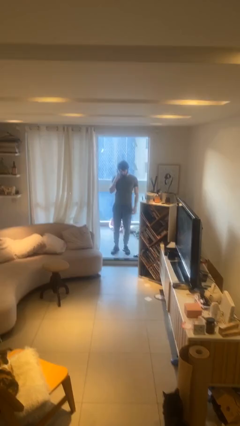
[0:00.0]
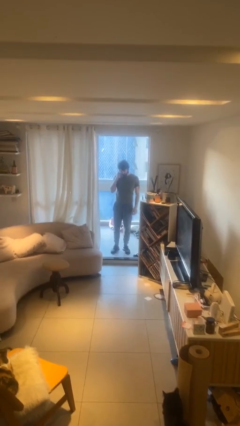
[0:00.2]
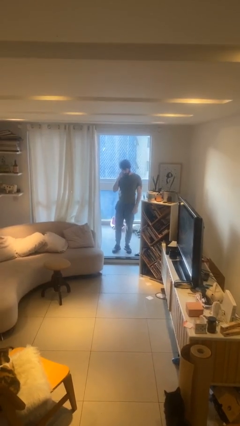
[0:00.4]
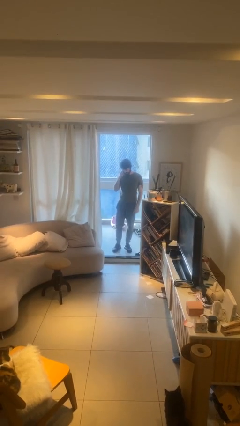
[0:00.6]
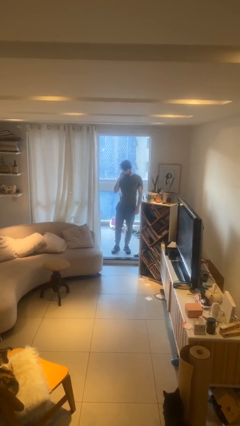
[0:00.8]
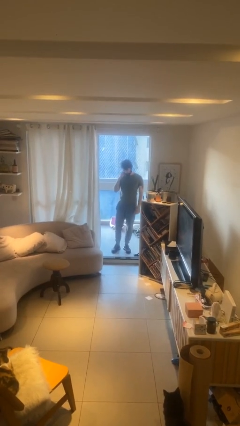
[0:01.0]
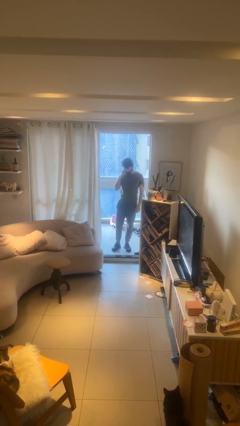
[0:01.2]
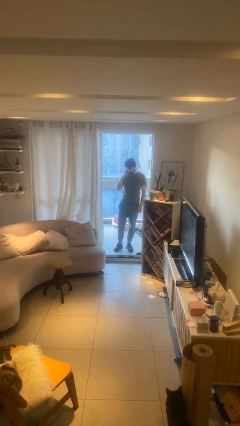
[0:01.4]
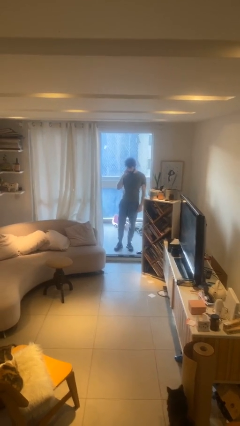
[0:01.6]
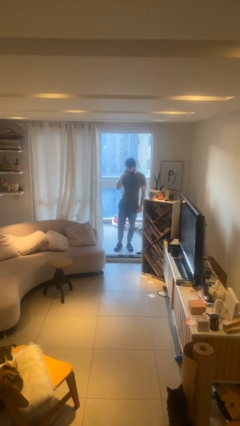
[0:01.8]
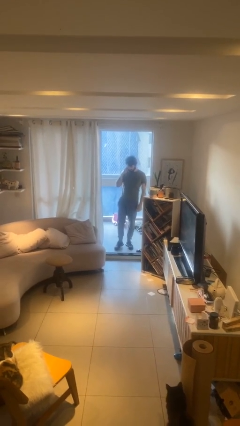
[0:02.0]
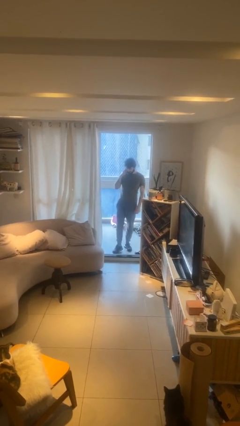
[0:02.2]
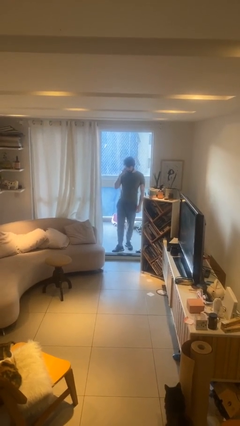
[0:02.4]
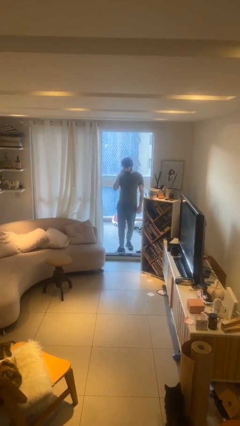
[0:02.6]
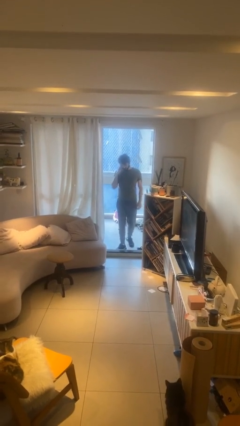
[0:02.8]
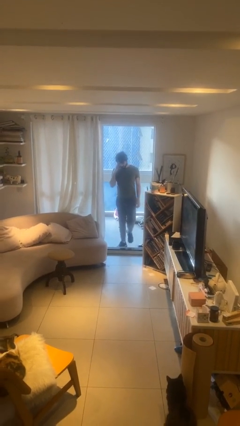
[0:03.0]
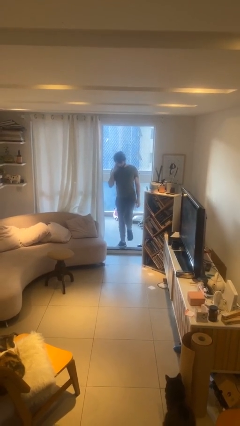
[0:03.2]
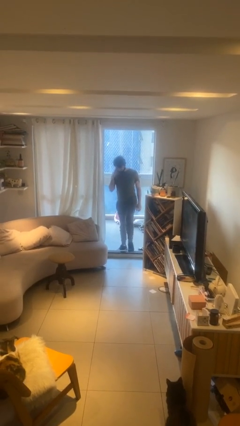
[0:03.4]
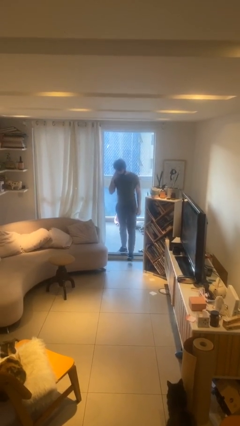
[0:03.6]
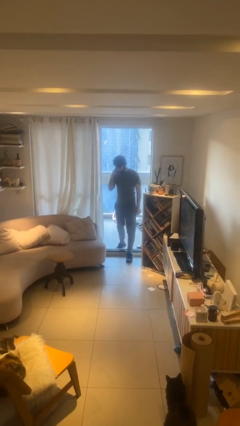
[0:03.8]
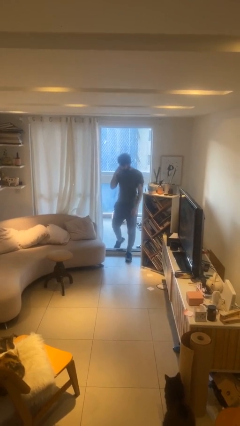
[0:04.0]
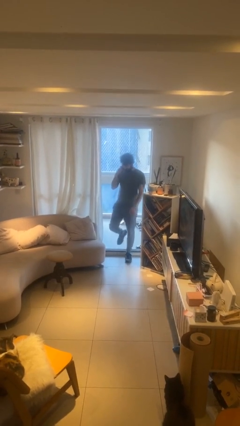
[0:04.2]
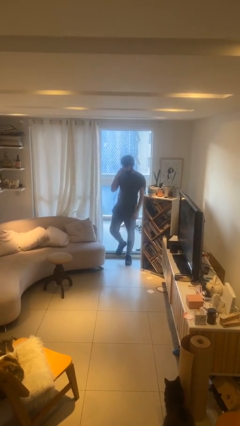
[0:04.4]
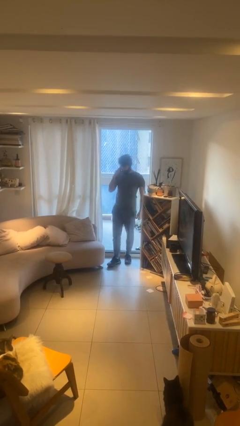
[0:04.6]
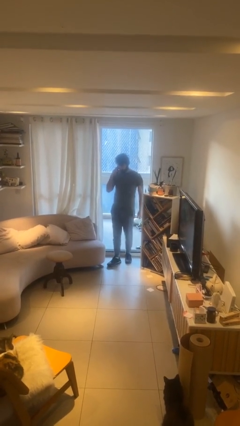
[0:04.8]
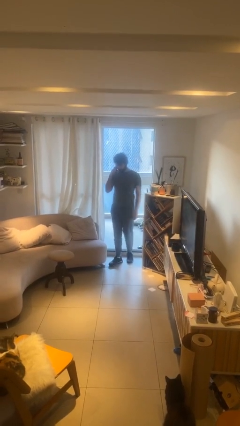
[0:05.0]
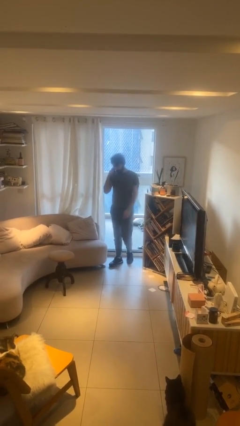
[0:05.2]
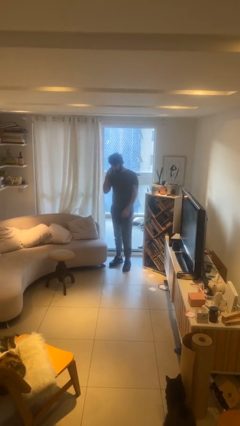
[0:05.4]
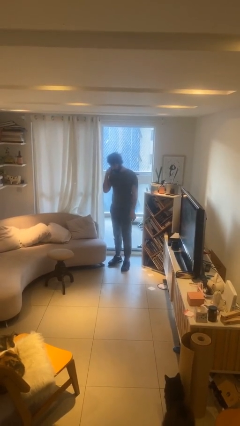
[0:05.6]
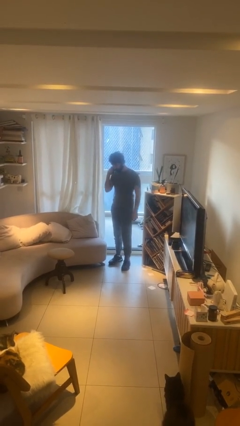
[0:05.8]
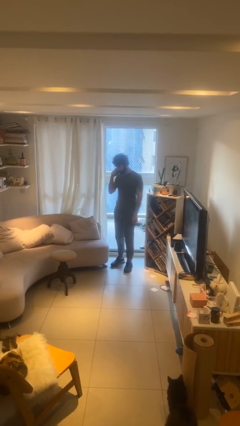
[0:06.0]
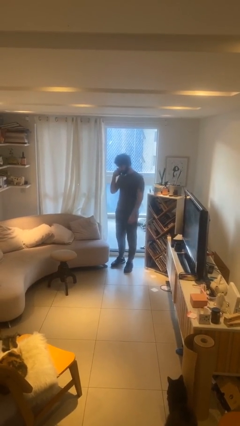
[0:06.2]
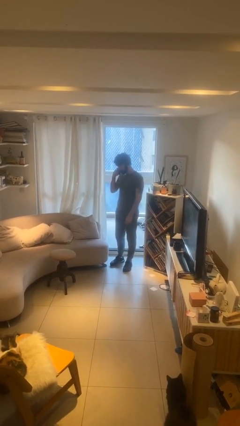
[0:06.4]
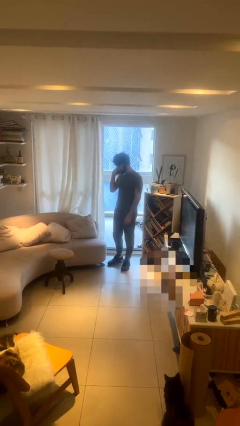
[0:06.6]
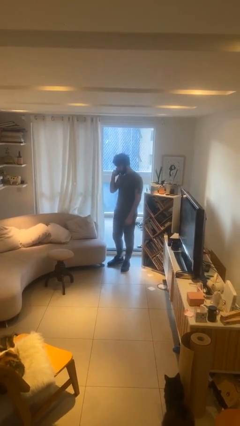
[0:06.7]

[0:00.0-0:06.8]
person enters scene through structure

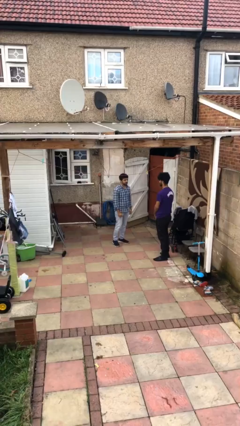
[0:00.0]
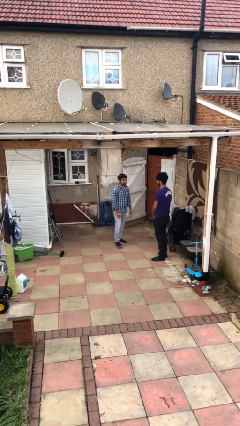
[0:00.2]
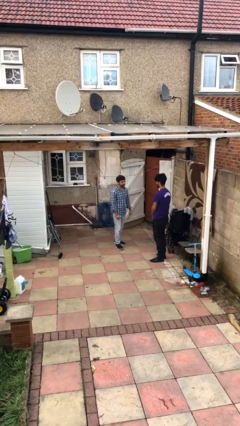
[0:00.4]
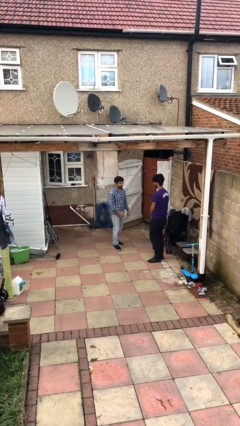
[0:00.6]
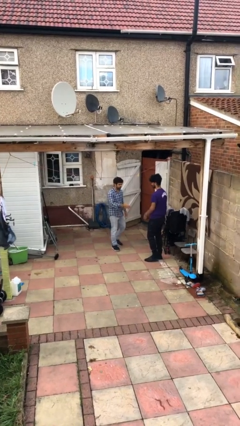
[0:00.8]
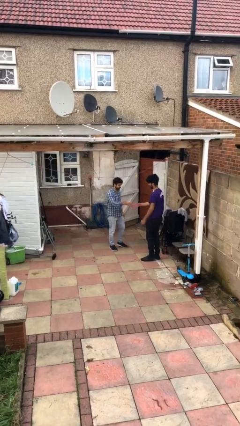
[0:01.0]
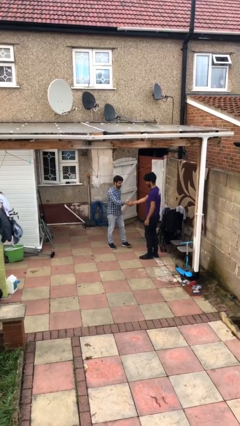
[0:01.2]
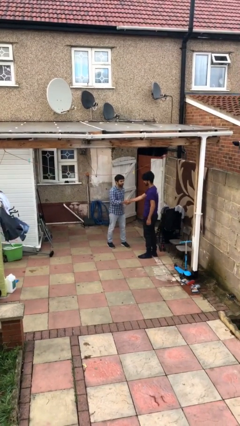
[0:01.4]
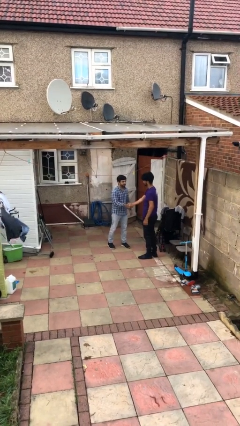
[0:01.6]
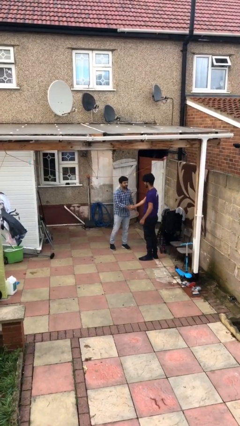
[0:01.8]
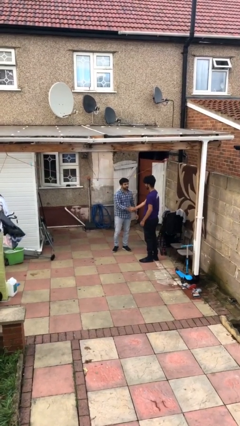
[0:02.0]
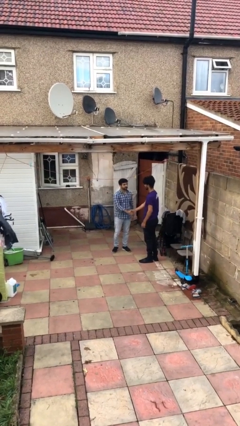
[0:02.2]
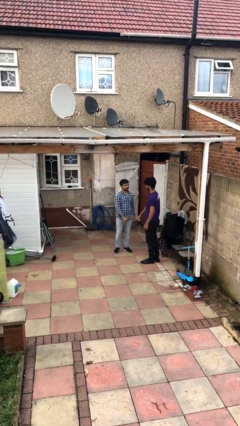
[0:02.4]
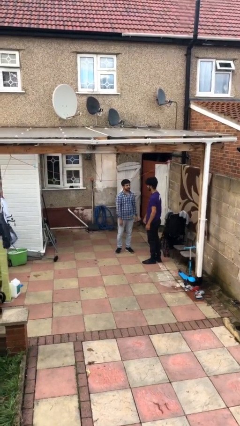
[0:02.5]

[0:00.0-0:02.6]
person shakes hand

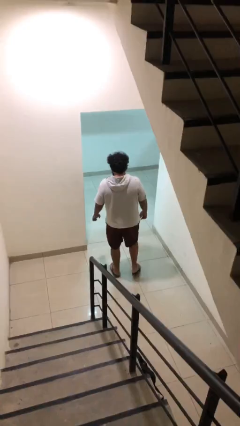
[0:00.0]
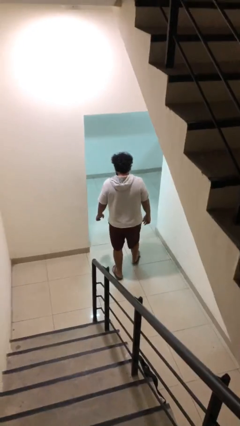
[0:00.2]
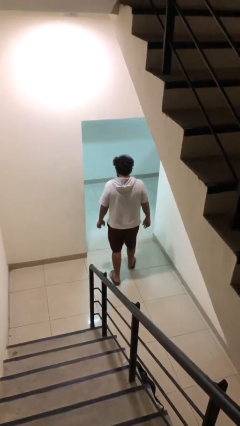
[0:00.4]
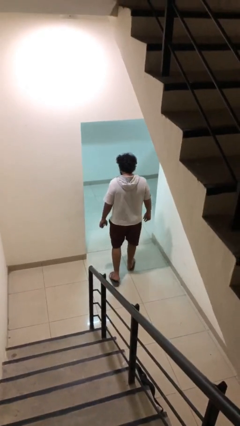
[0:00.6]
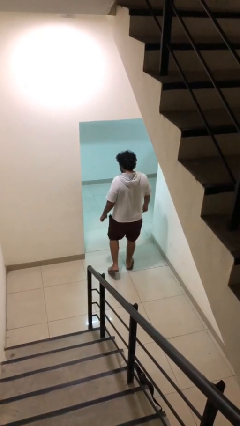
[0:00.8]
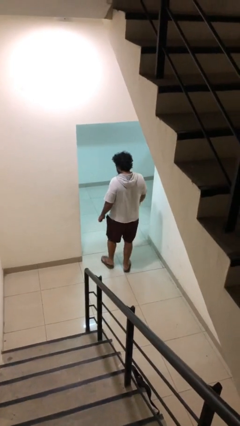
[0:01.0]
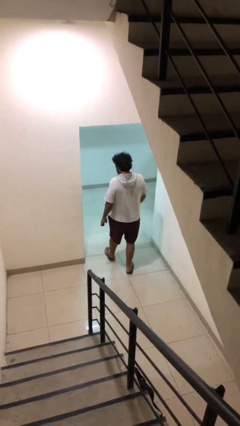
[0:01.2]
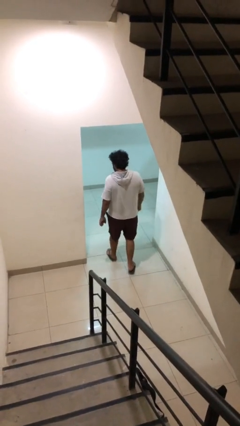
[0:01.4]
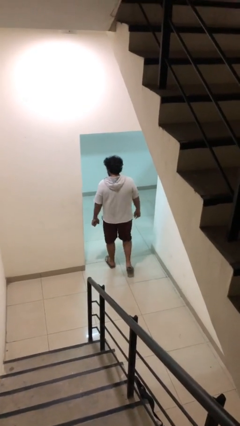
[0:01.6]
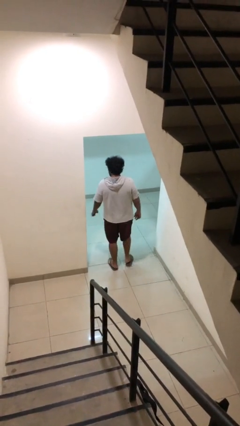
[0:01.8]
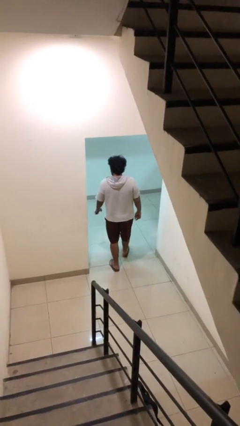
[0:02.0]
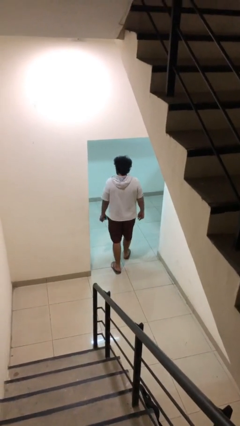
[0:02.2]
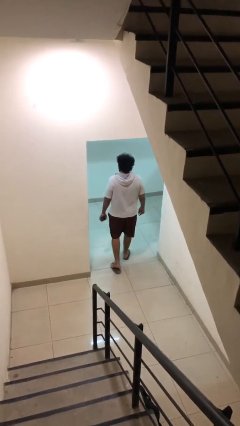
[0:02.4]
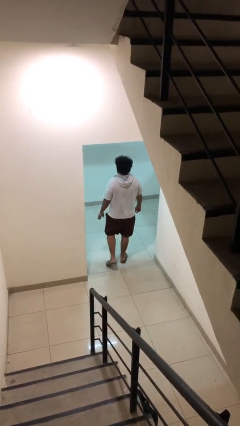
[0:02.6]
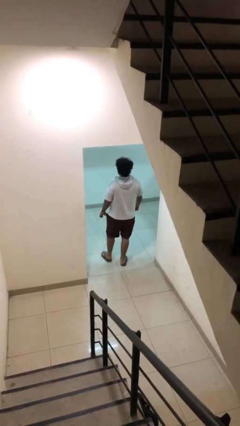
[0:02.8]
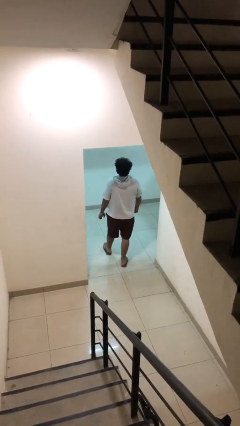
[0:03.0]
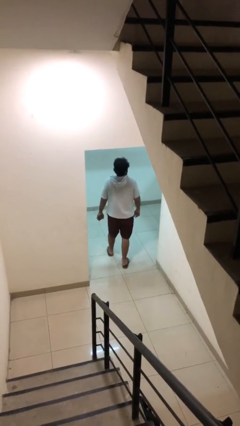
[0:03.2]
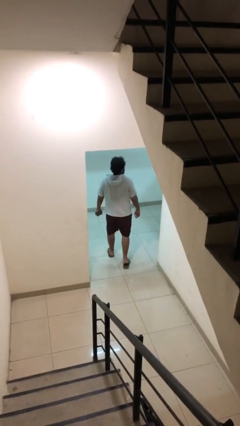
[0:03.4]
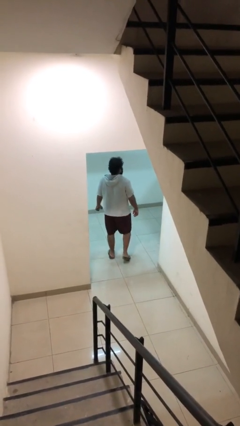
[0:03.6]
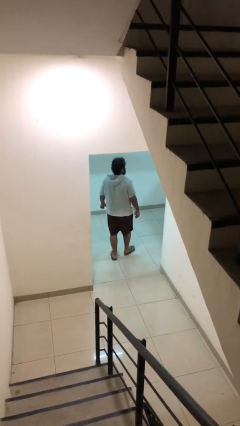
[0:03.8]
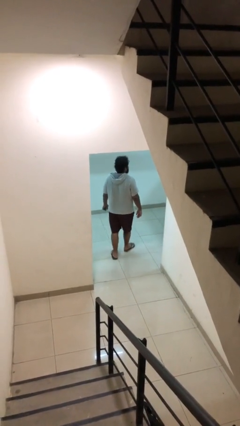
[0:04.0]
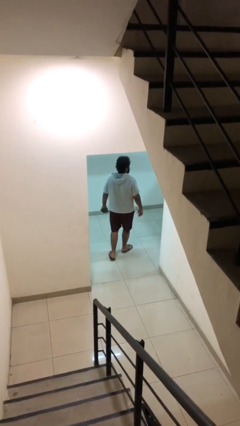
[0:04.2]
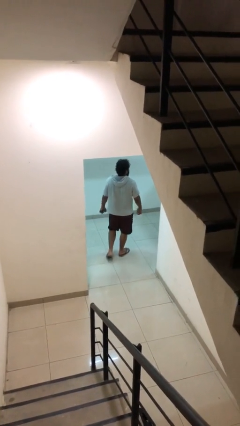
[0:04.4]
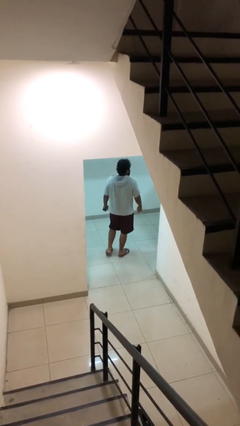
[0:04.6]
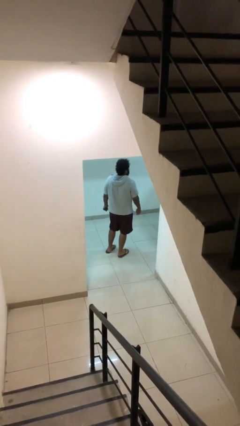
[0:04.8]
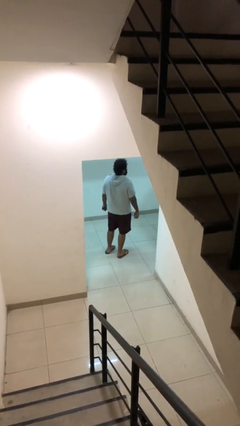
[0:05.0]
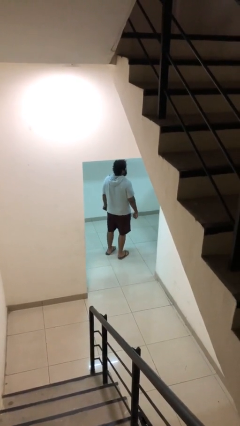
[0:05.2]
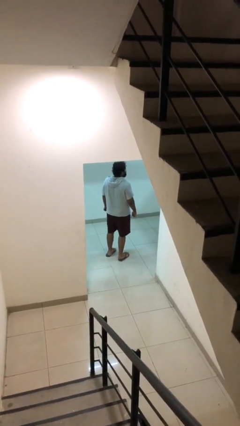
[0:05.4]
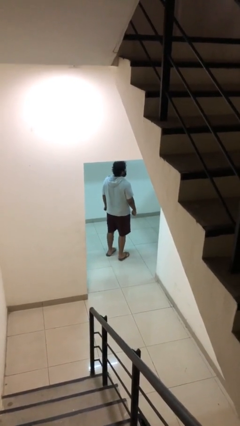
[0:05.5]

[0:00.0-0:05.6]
person exits scene through structure

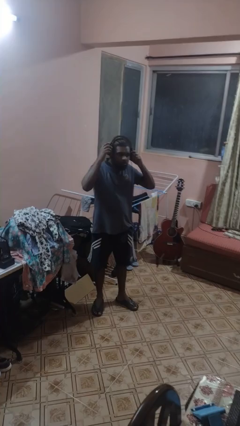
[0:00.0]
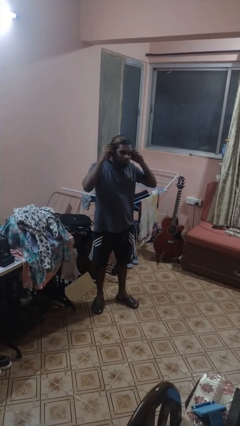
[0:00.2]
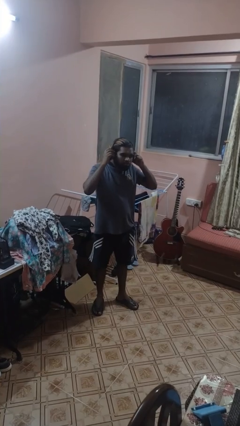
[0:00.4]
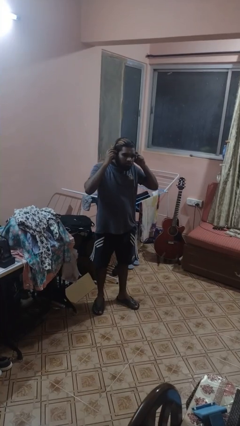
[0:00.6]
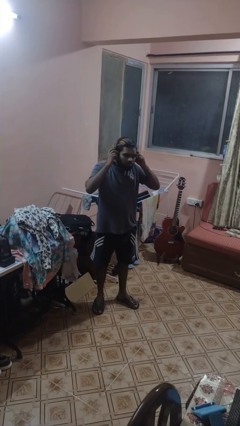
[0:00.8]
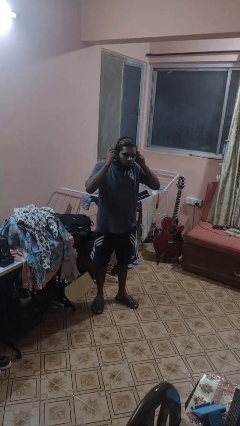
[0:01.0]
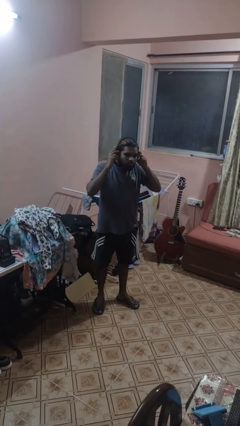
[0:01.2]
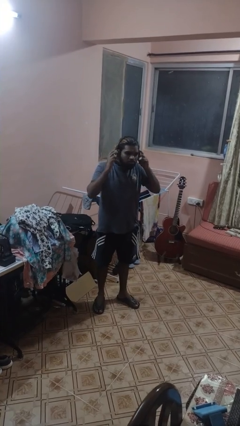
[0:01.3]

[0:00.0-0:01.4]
person puts on headphones

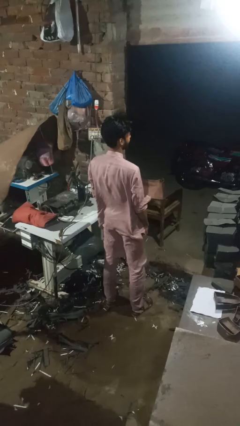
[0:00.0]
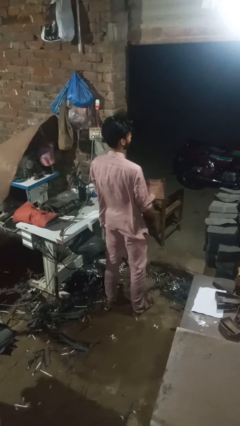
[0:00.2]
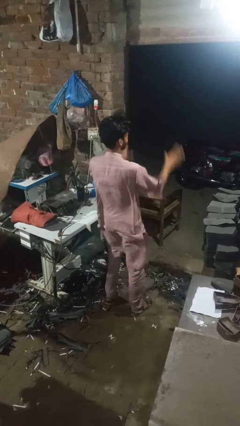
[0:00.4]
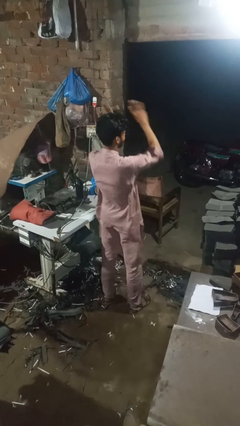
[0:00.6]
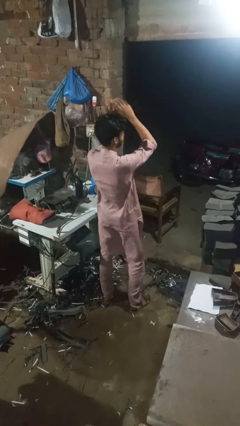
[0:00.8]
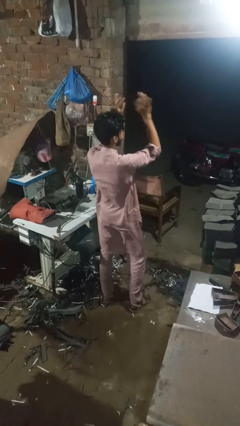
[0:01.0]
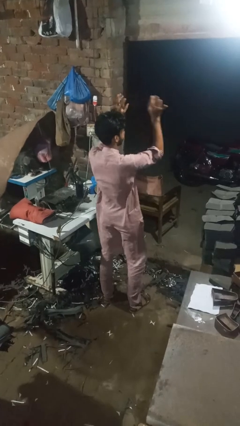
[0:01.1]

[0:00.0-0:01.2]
person dances in place
